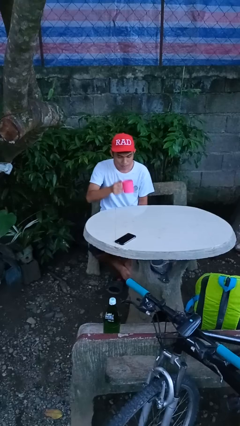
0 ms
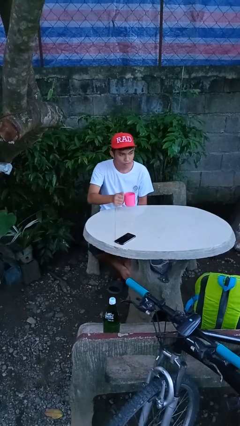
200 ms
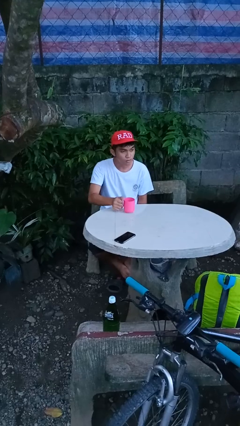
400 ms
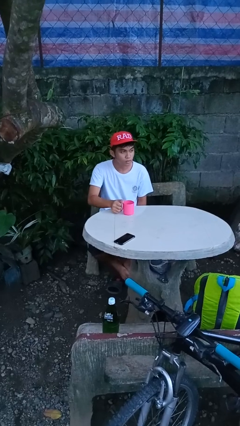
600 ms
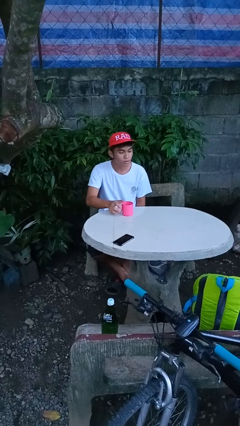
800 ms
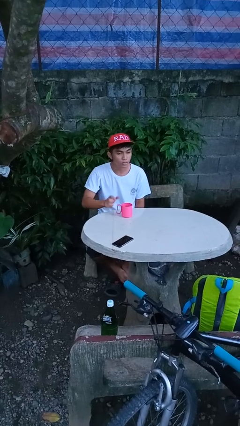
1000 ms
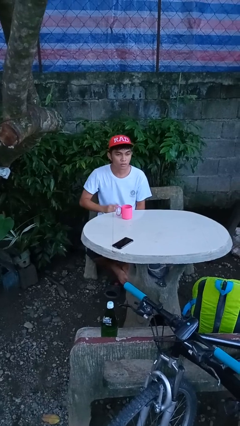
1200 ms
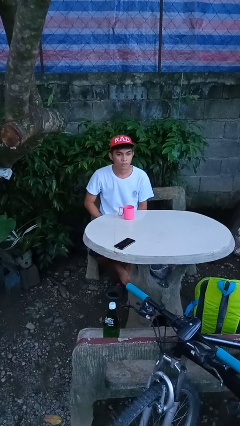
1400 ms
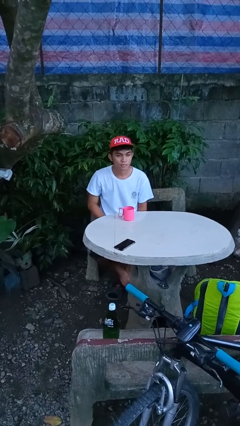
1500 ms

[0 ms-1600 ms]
person puts down object on table

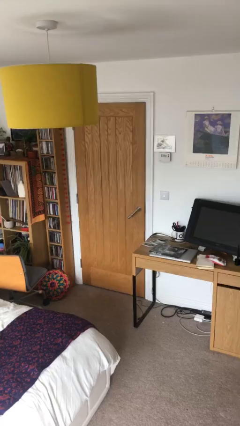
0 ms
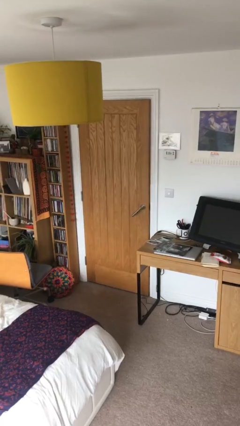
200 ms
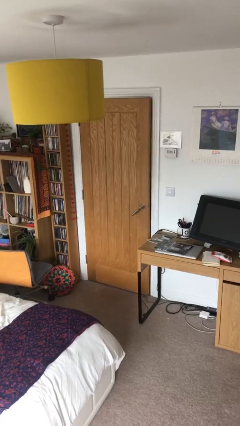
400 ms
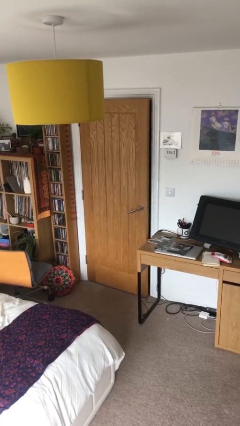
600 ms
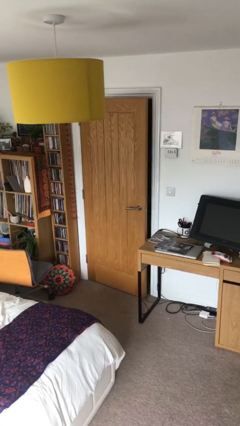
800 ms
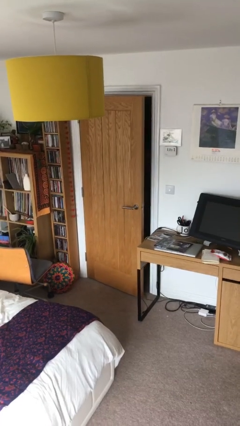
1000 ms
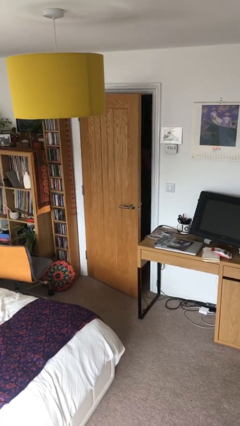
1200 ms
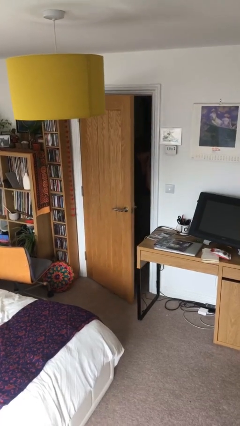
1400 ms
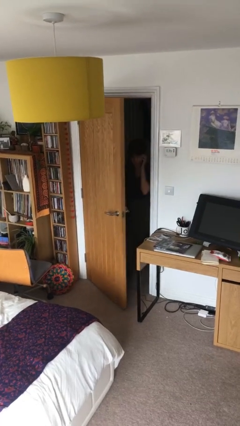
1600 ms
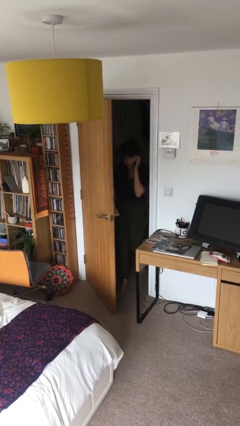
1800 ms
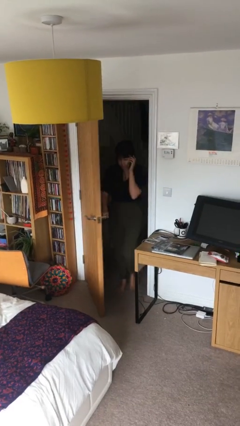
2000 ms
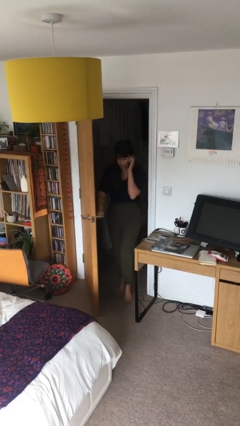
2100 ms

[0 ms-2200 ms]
person opens facility door

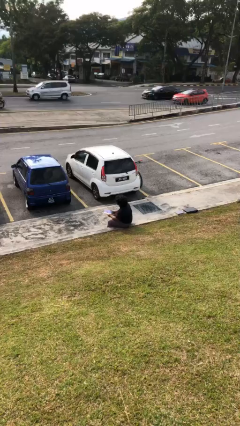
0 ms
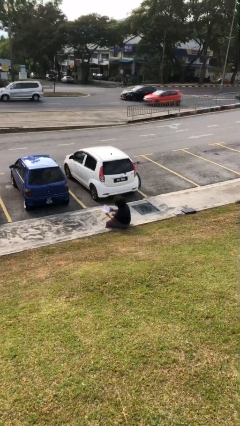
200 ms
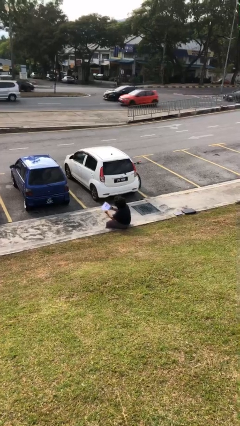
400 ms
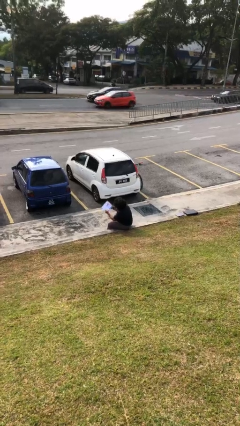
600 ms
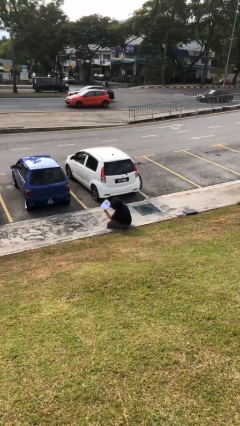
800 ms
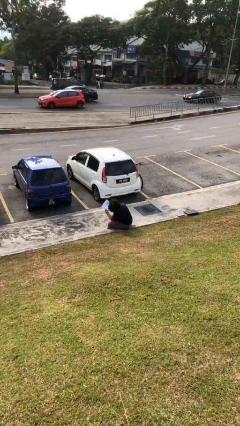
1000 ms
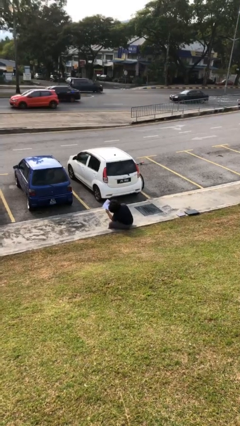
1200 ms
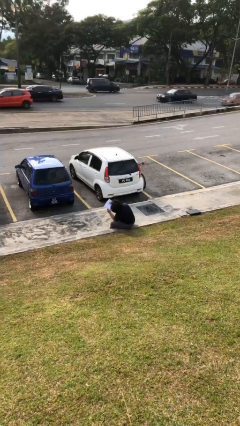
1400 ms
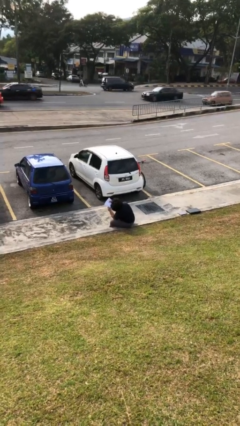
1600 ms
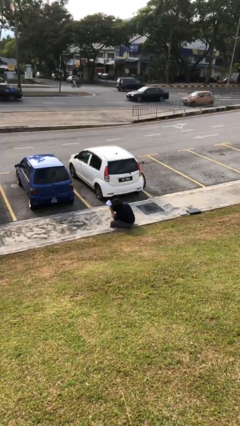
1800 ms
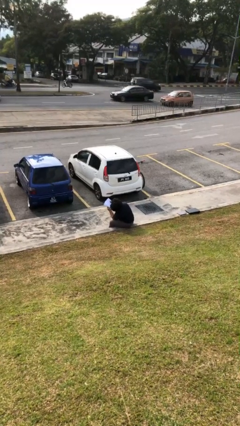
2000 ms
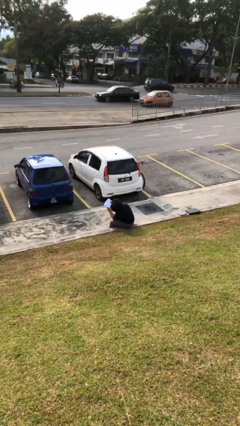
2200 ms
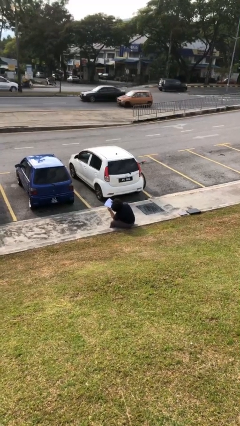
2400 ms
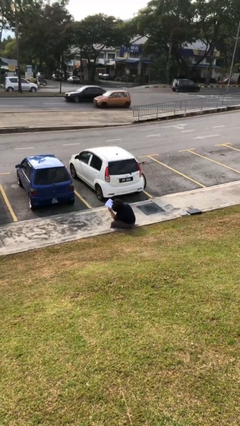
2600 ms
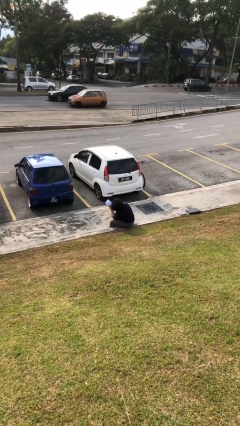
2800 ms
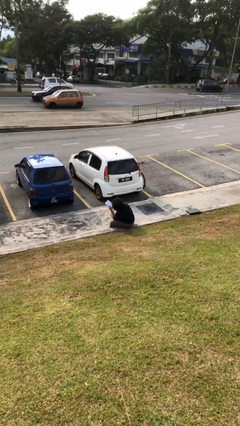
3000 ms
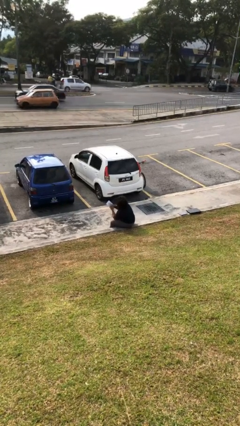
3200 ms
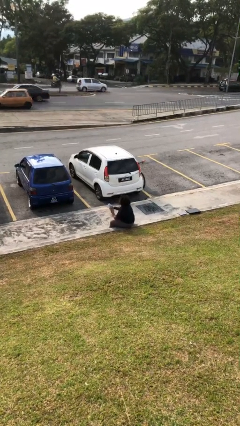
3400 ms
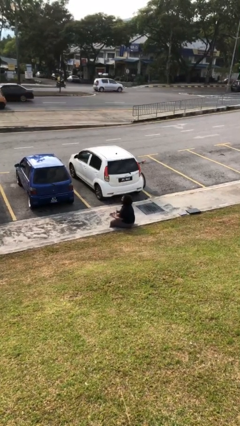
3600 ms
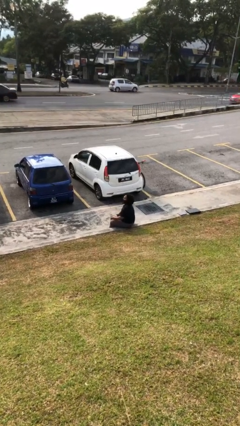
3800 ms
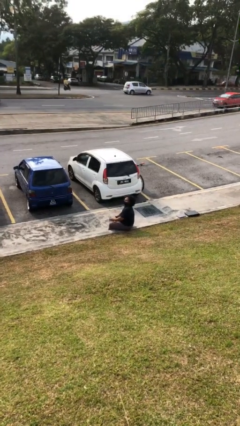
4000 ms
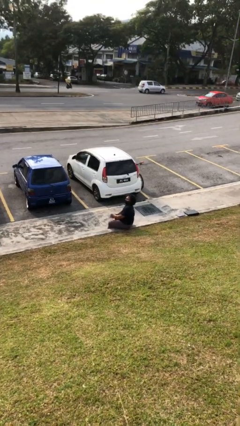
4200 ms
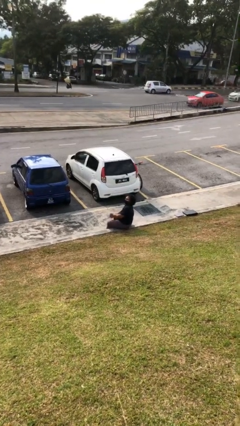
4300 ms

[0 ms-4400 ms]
person reads document

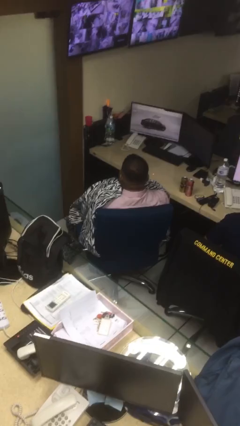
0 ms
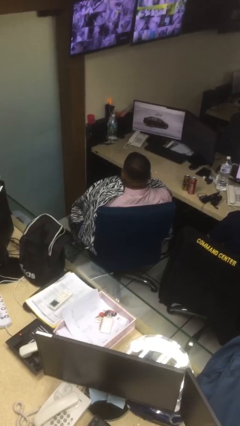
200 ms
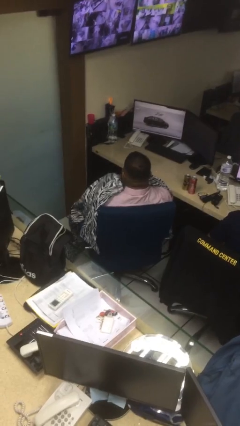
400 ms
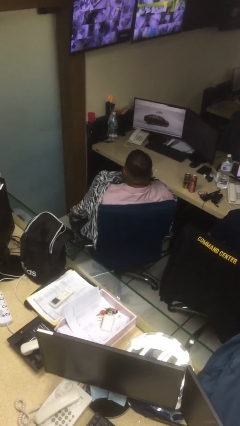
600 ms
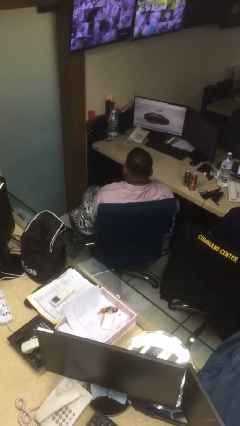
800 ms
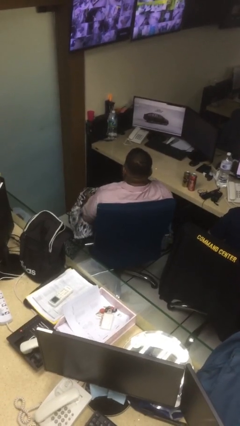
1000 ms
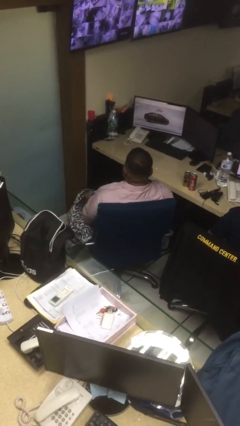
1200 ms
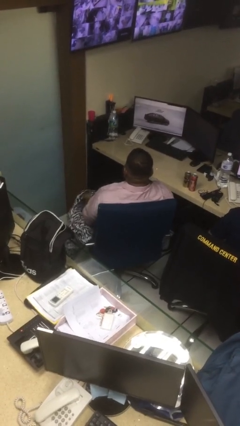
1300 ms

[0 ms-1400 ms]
person uncovers with blanket

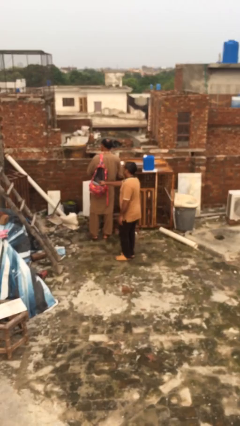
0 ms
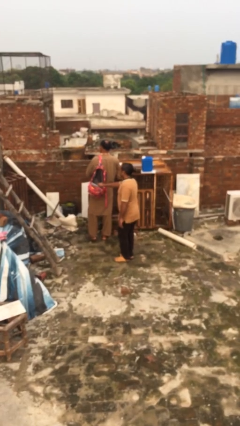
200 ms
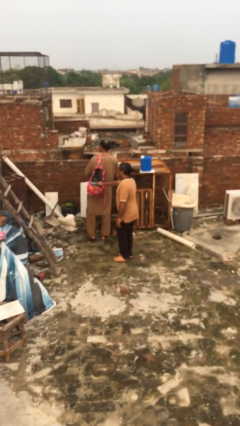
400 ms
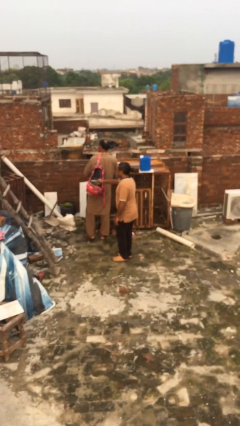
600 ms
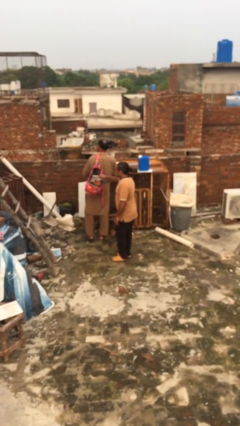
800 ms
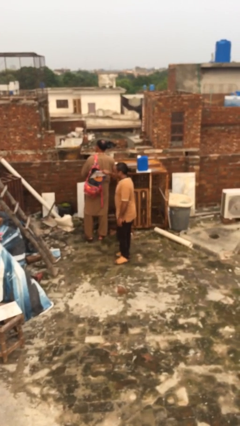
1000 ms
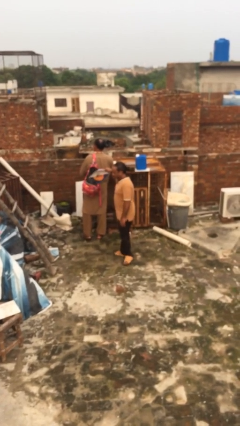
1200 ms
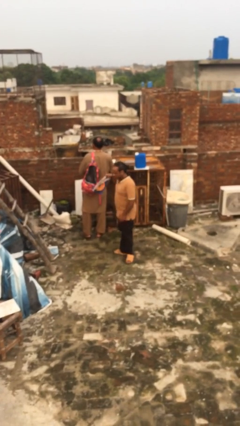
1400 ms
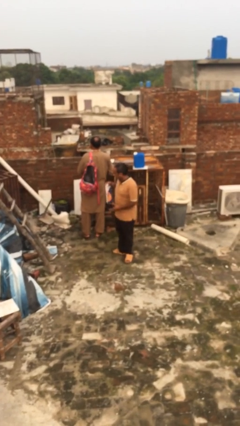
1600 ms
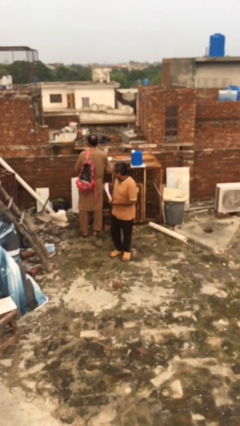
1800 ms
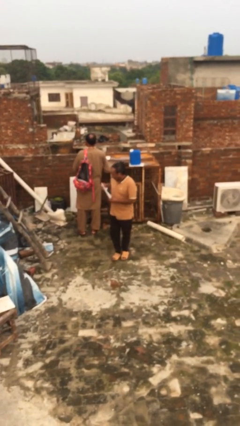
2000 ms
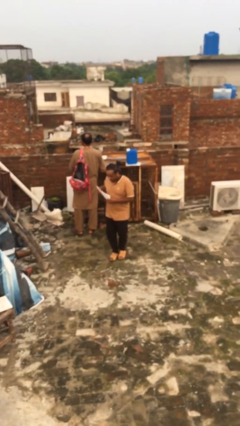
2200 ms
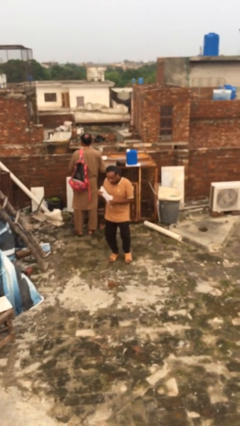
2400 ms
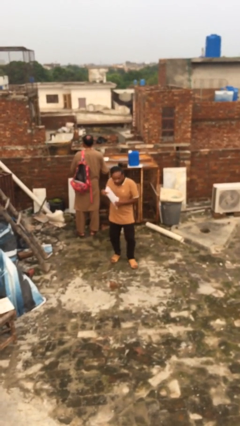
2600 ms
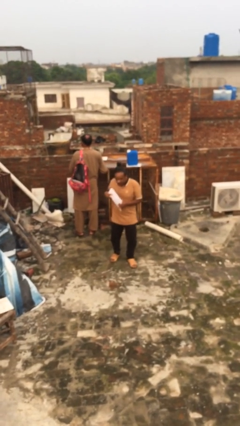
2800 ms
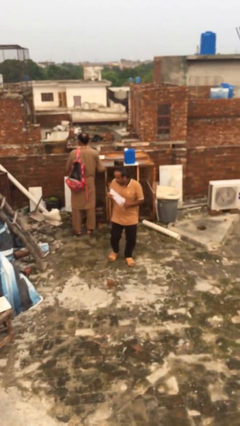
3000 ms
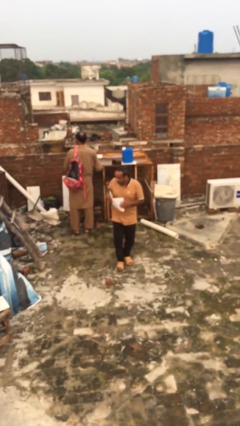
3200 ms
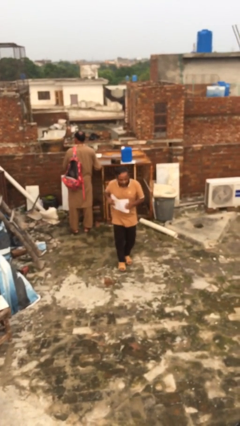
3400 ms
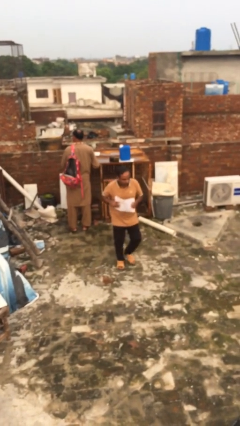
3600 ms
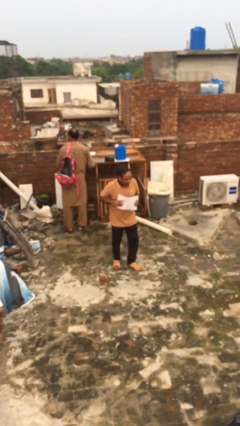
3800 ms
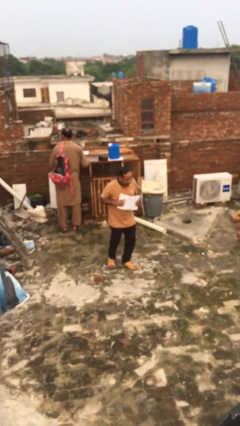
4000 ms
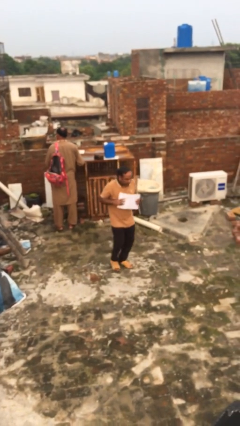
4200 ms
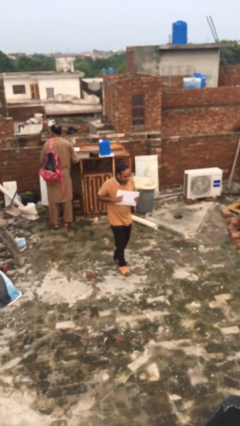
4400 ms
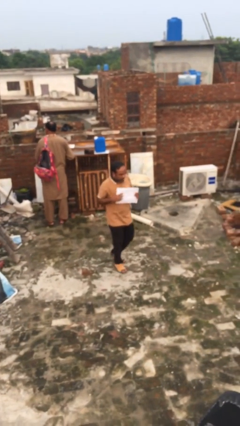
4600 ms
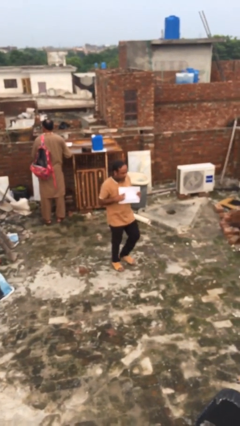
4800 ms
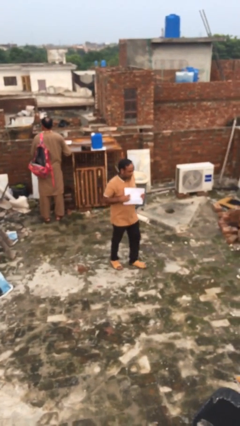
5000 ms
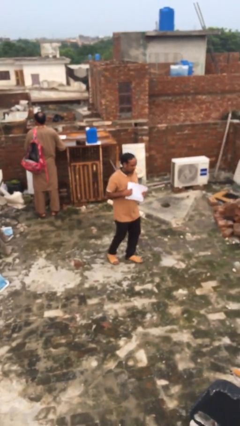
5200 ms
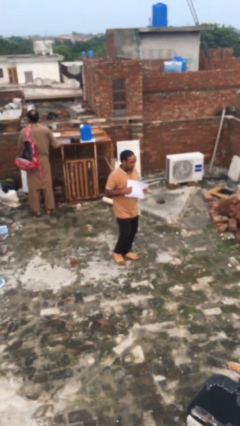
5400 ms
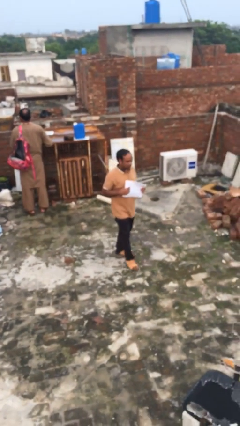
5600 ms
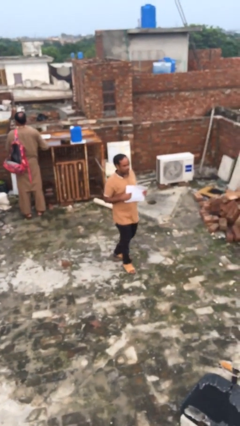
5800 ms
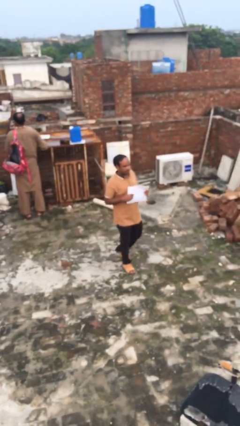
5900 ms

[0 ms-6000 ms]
person steals object from person

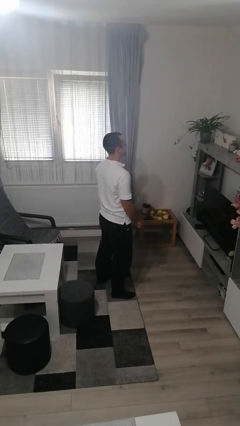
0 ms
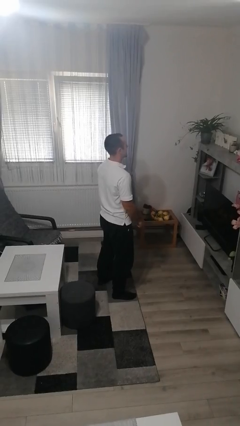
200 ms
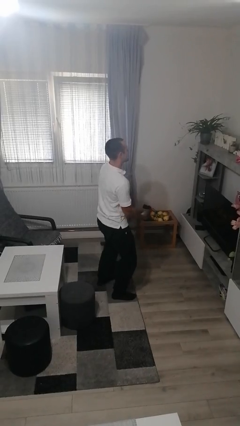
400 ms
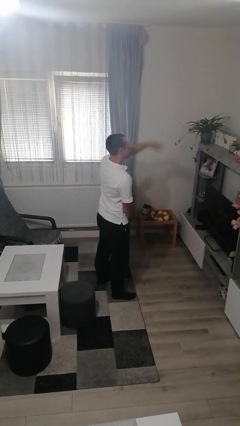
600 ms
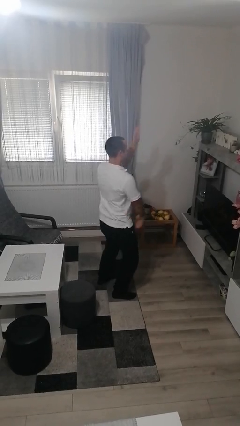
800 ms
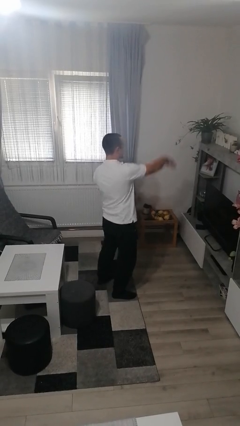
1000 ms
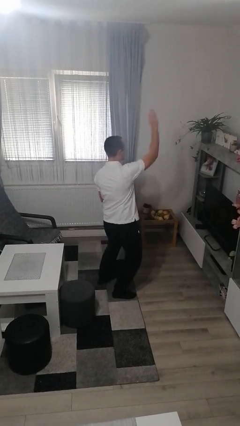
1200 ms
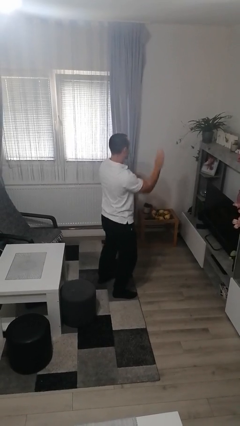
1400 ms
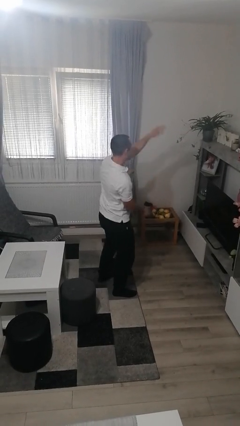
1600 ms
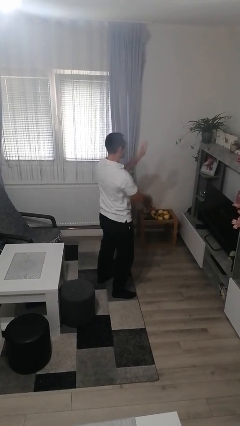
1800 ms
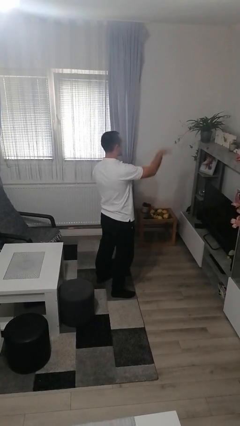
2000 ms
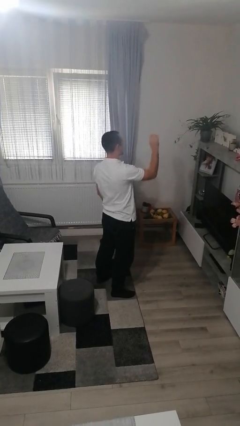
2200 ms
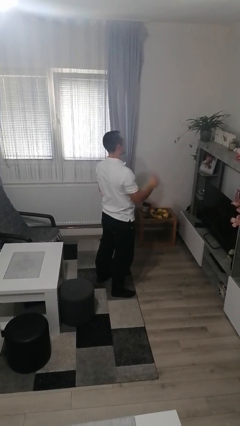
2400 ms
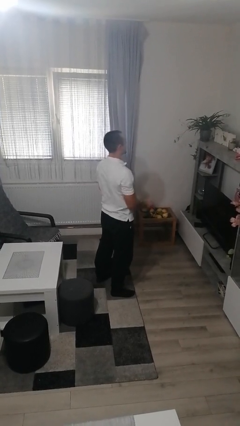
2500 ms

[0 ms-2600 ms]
person dances in place
